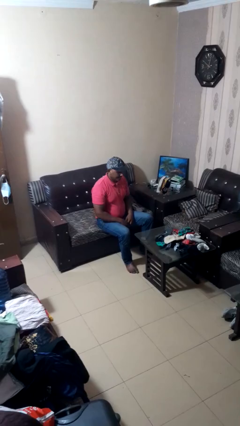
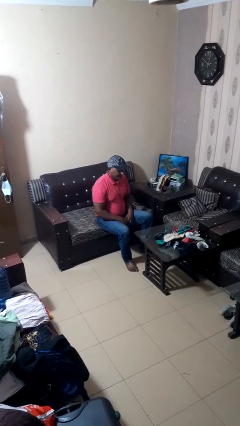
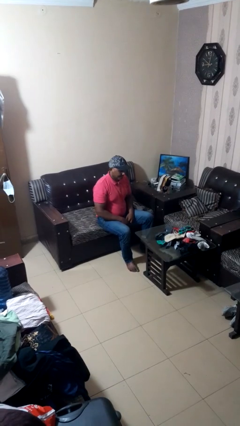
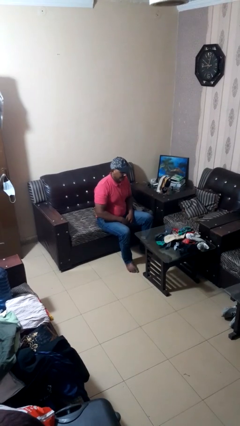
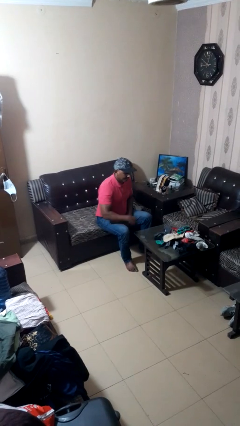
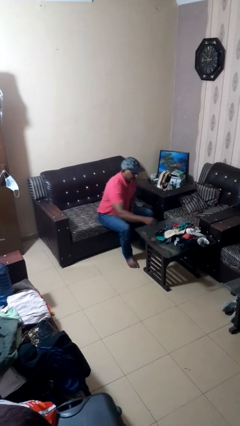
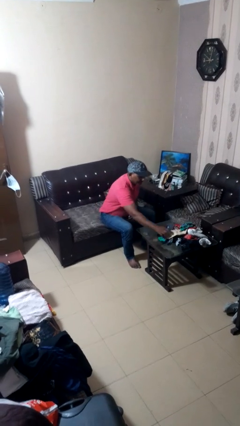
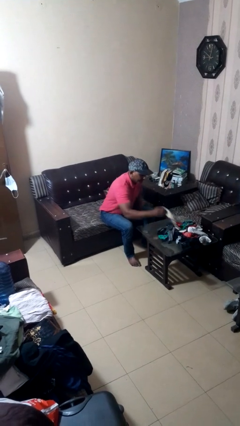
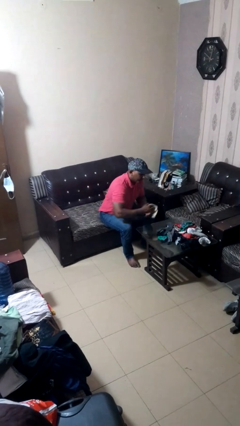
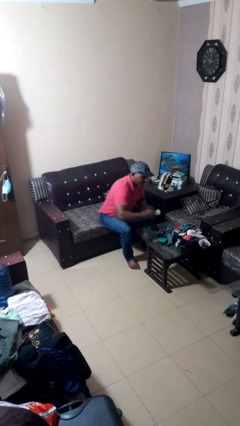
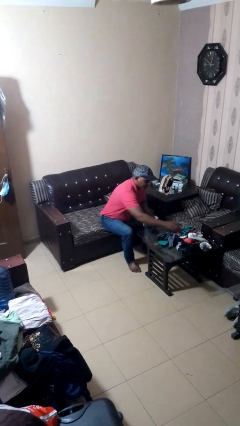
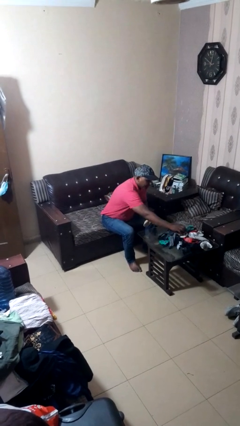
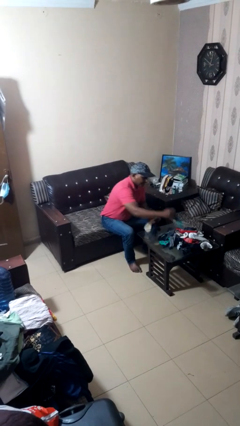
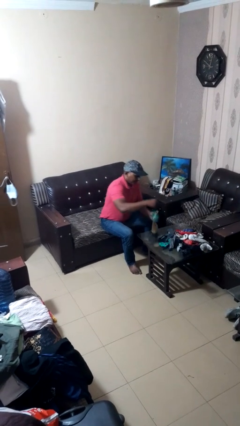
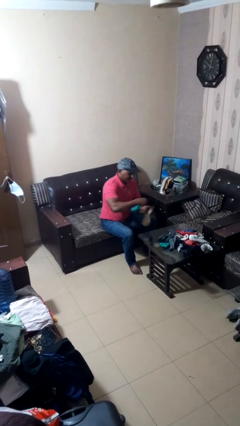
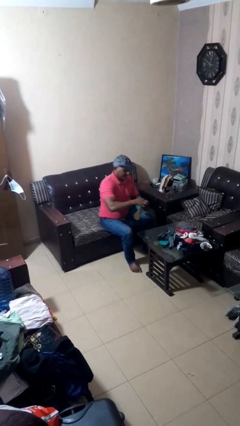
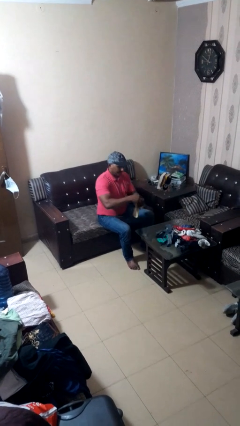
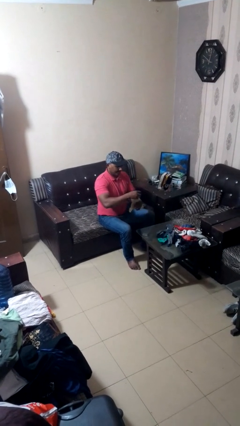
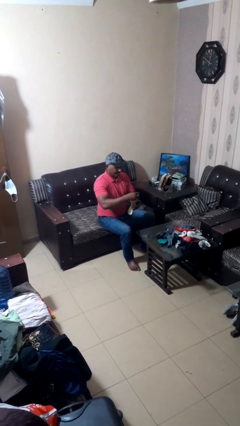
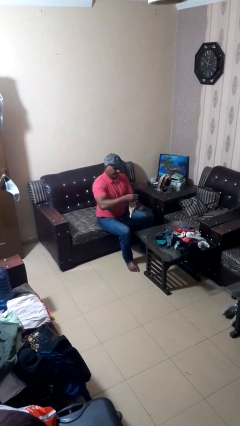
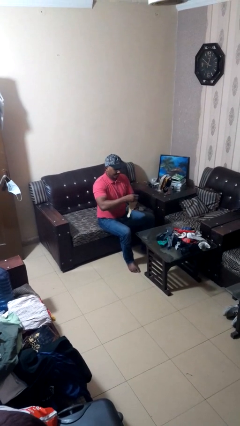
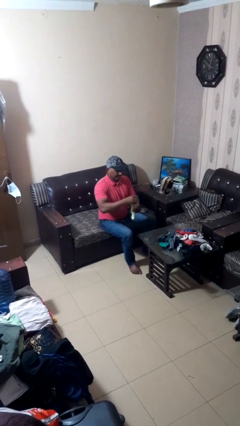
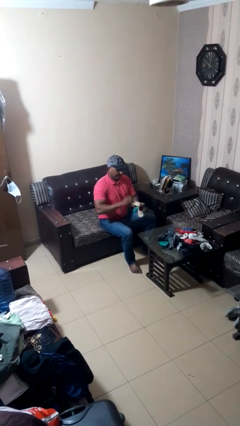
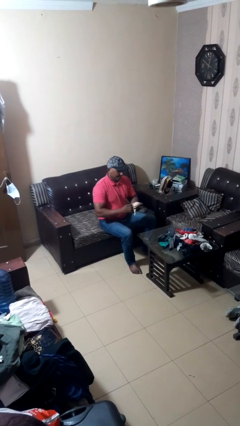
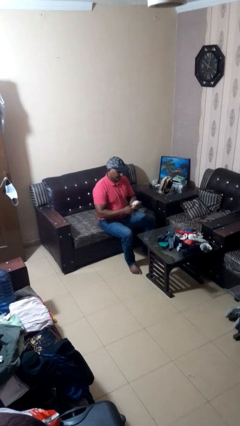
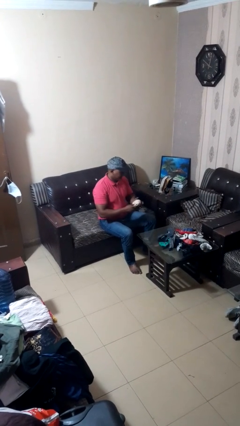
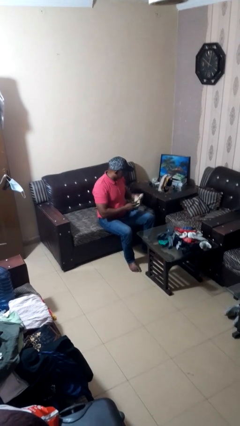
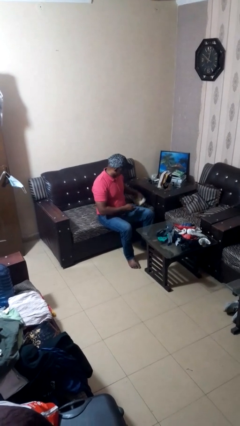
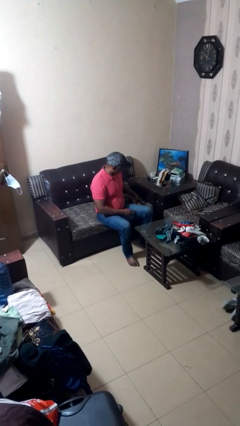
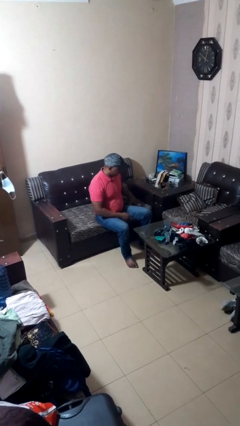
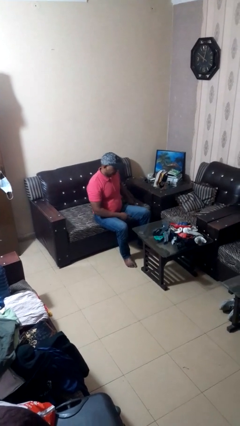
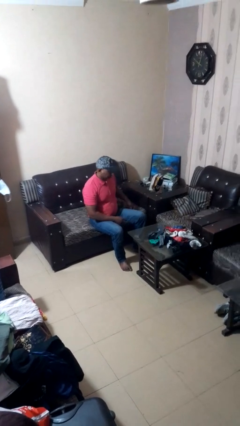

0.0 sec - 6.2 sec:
person folds socks

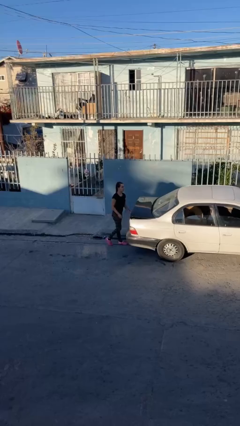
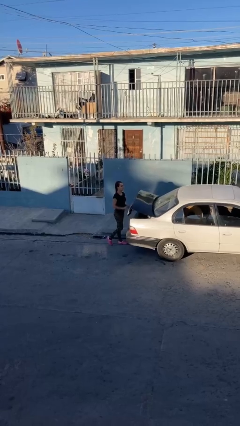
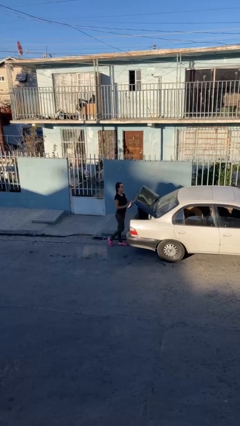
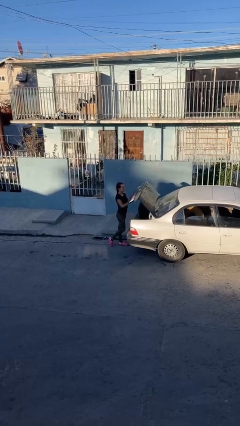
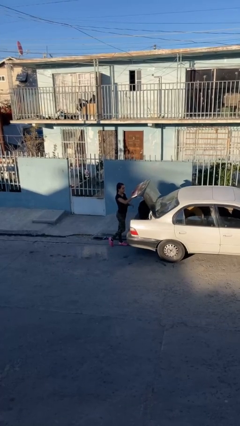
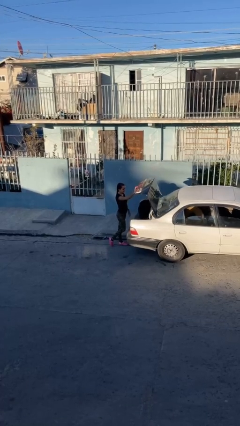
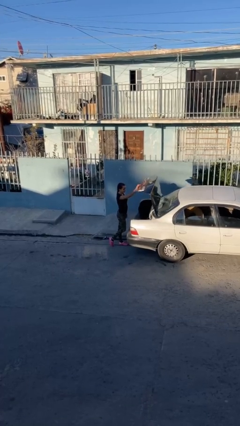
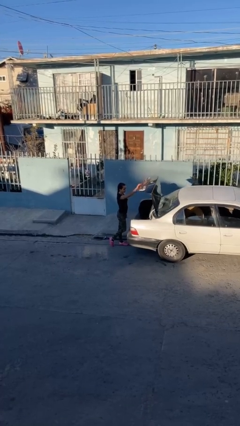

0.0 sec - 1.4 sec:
person opens car trunk

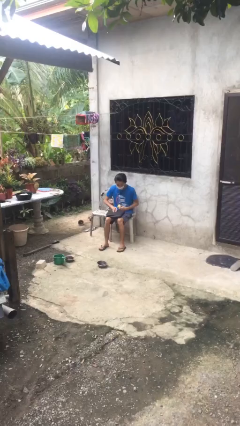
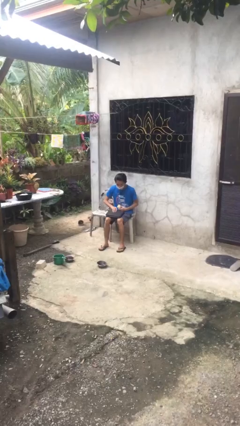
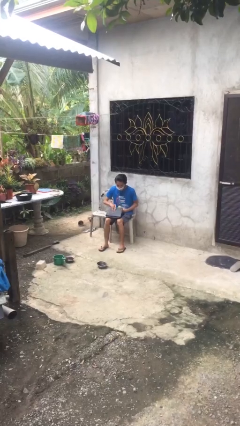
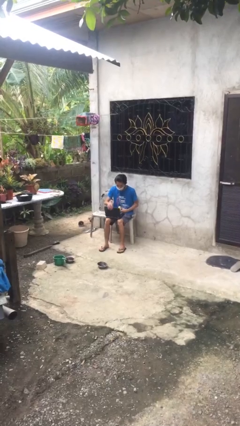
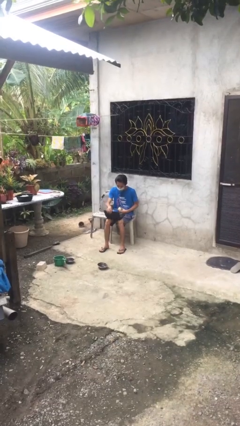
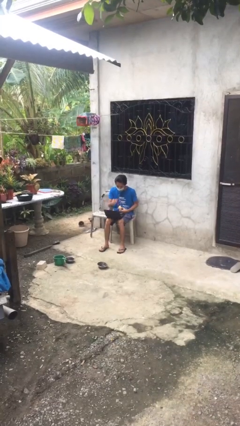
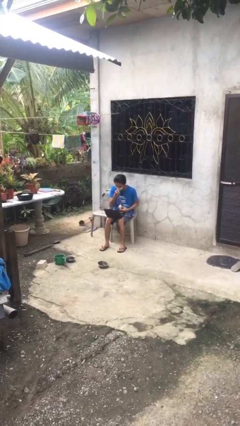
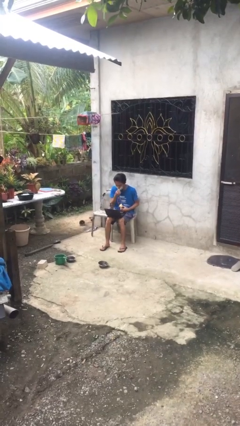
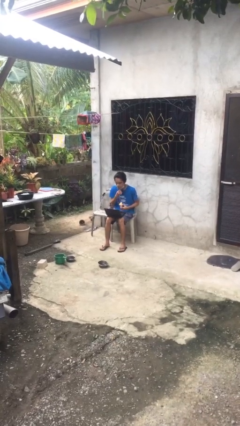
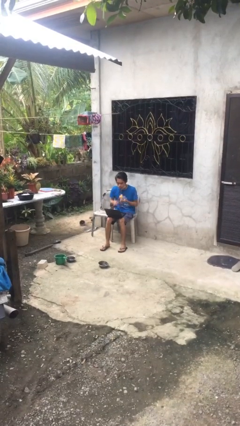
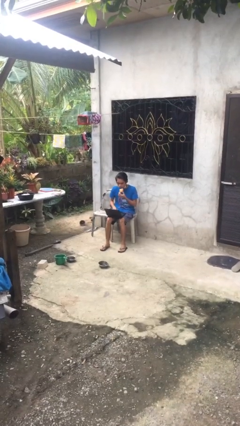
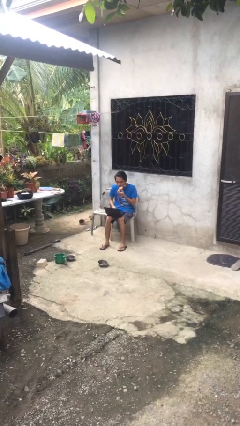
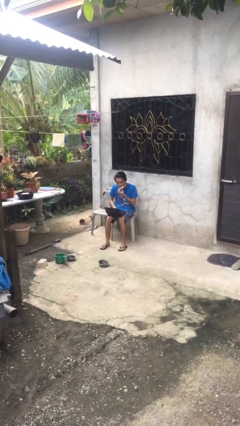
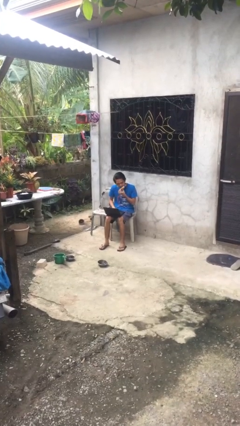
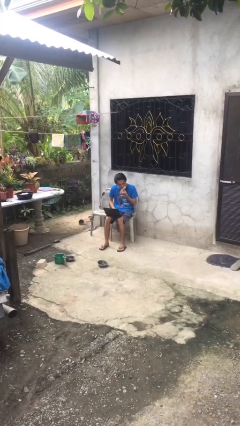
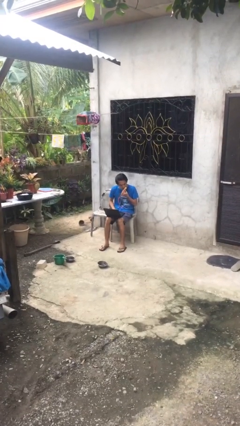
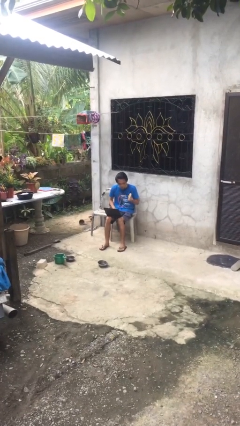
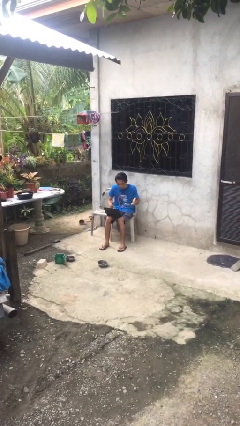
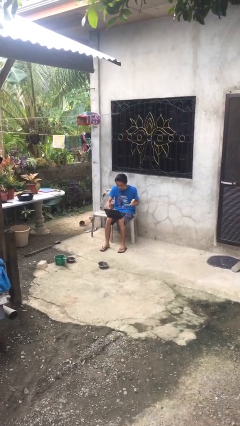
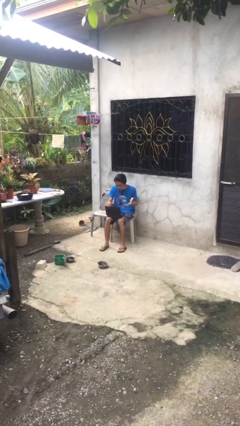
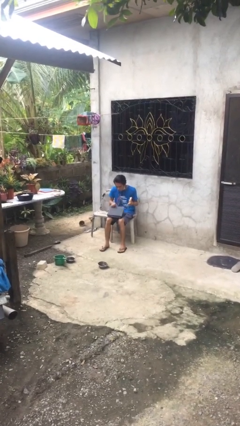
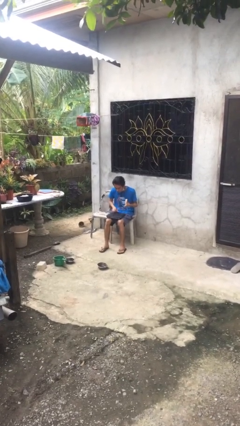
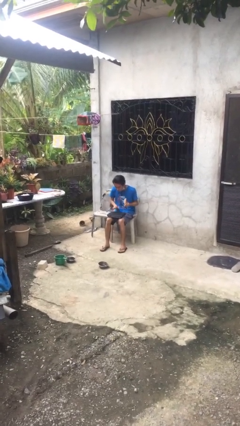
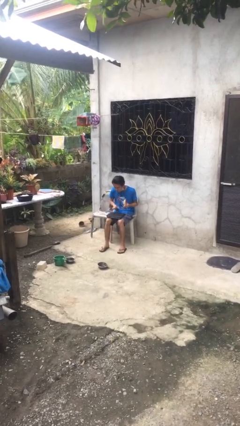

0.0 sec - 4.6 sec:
person interacts with laptop

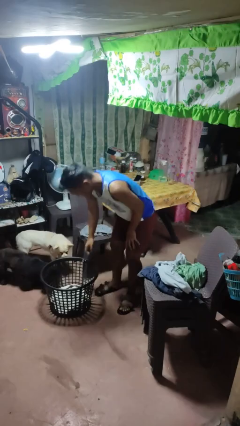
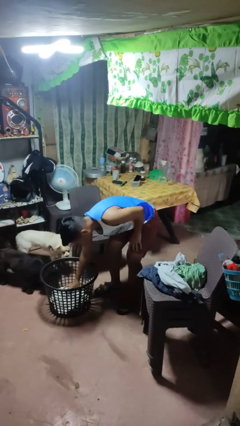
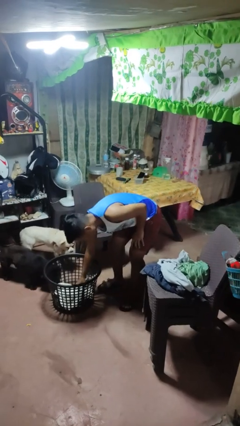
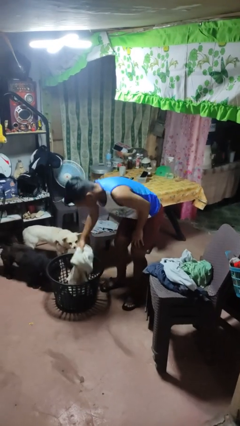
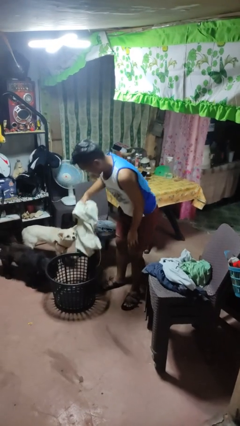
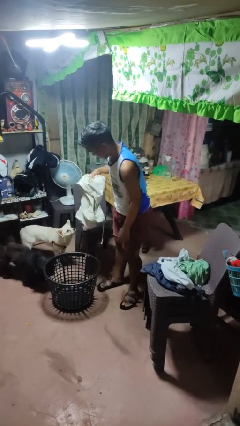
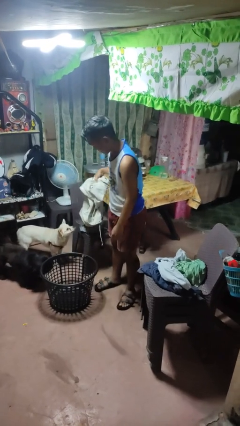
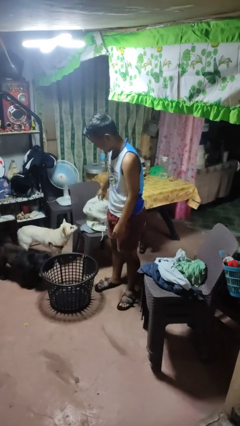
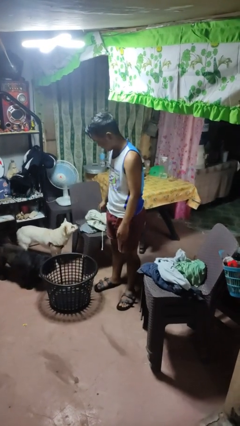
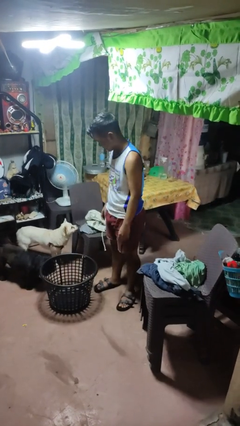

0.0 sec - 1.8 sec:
person takes object from basket

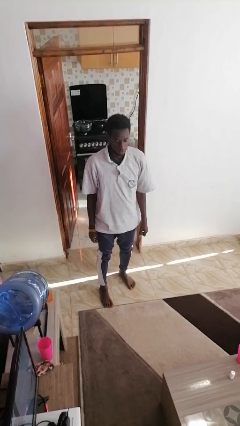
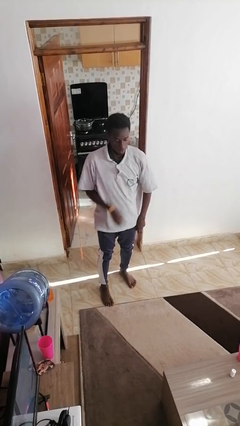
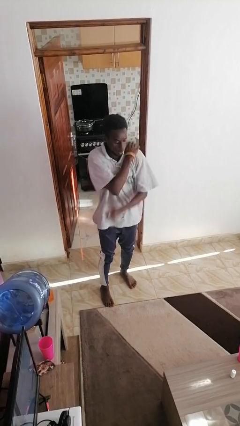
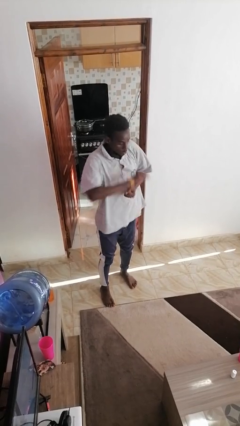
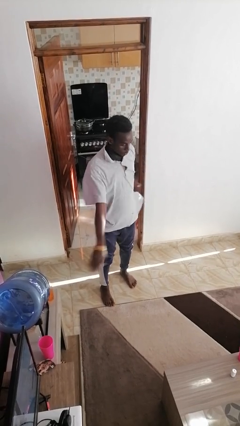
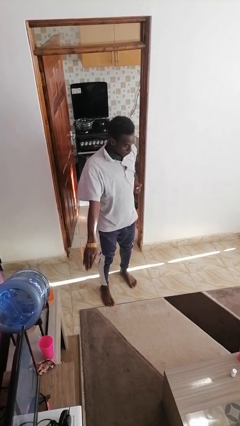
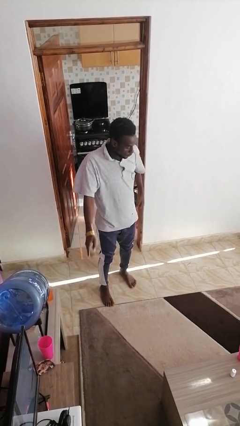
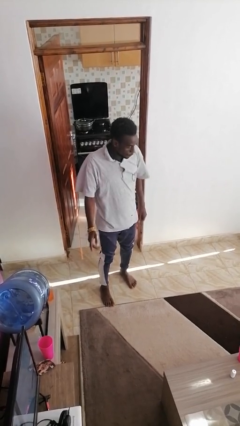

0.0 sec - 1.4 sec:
person karate chop

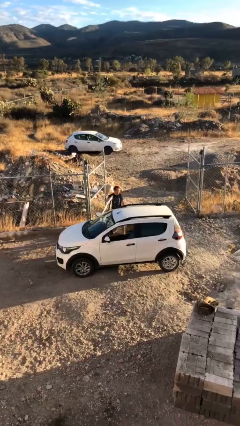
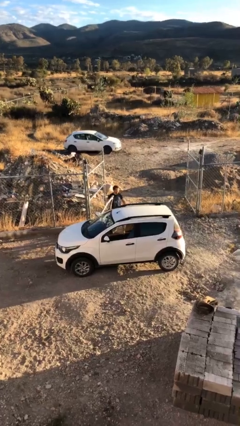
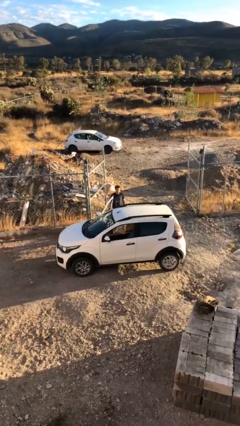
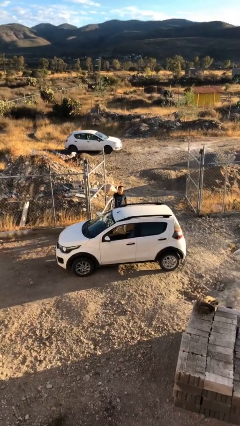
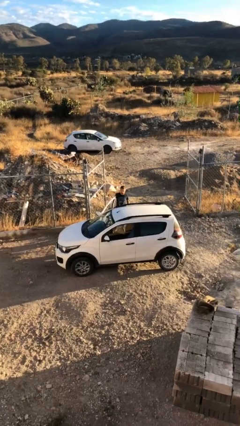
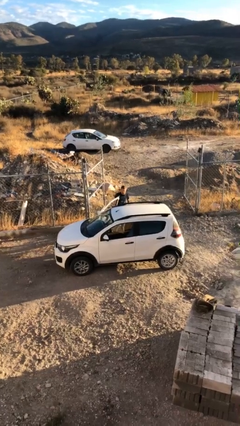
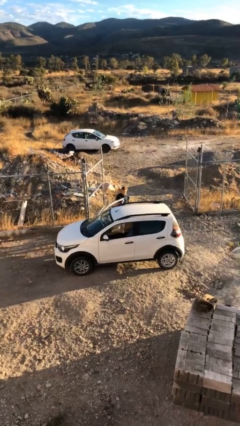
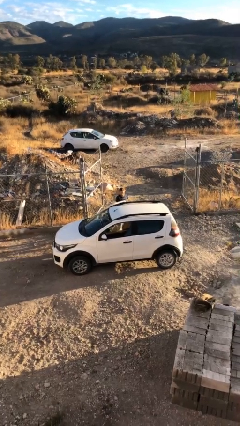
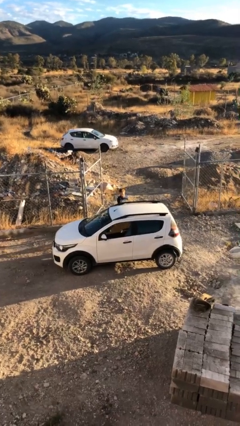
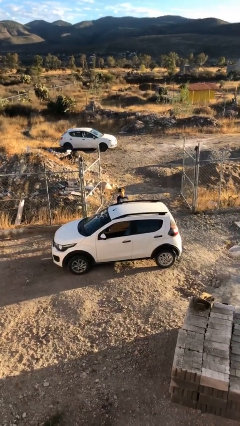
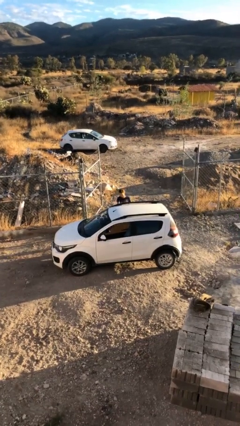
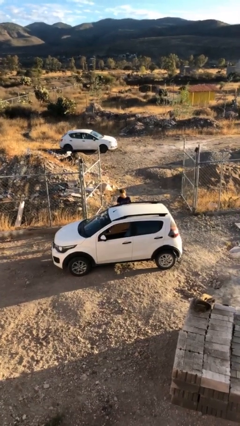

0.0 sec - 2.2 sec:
person closes car door
